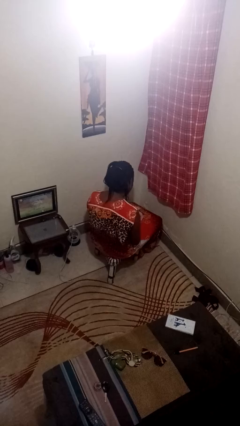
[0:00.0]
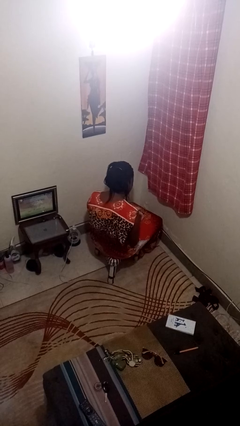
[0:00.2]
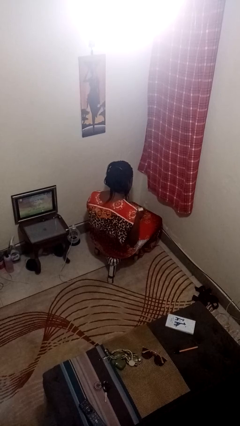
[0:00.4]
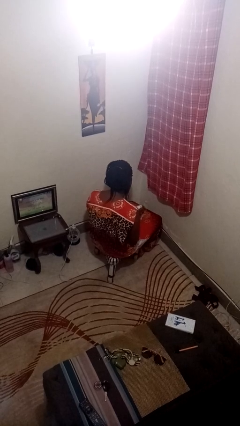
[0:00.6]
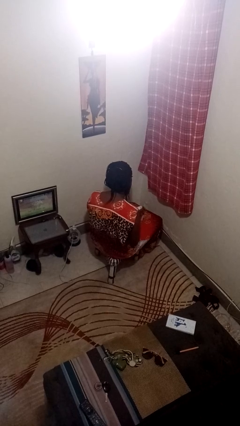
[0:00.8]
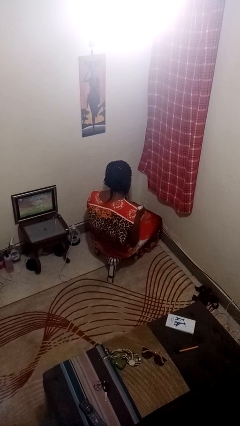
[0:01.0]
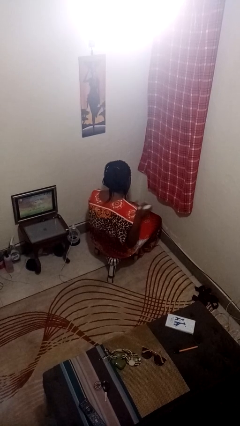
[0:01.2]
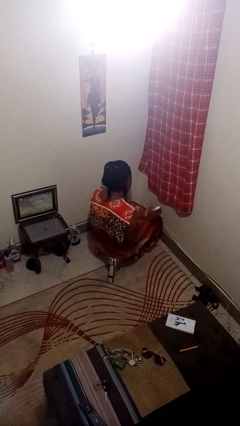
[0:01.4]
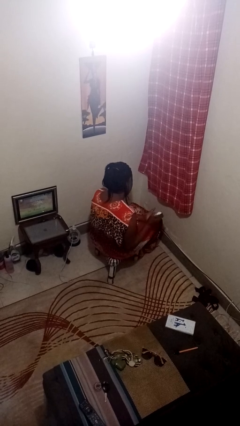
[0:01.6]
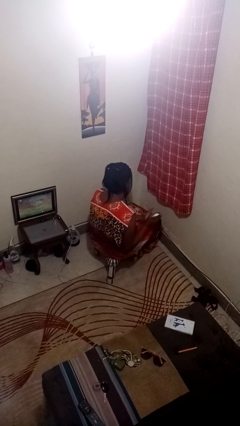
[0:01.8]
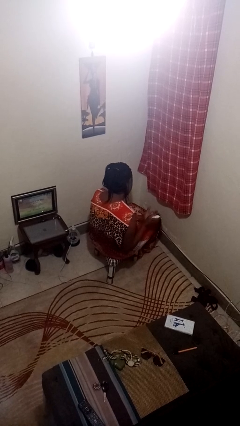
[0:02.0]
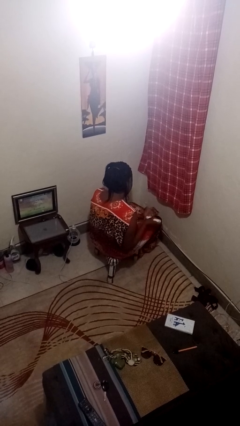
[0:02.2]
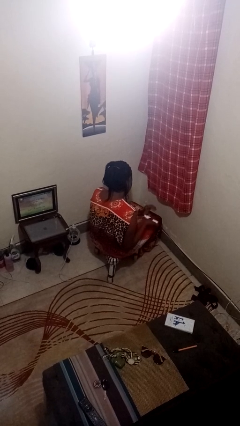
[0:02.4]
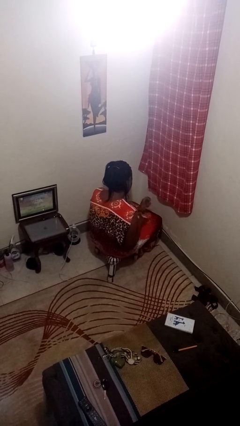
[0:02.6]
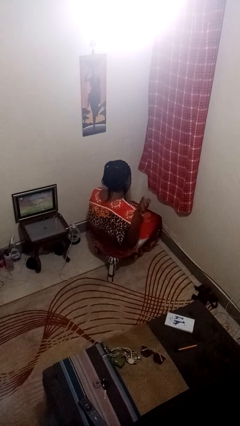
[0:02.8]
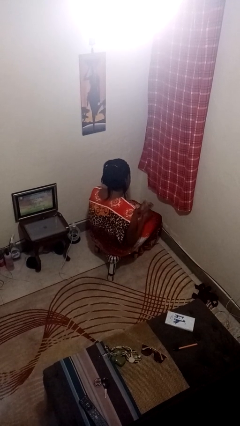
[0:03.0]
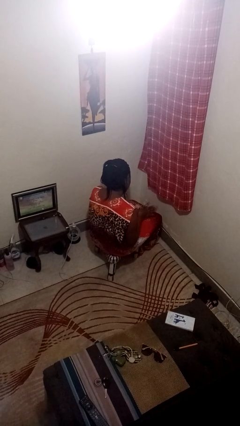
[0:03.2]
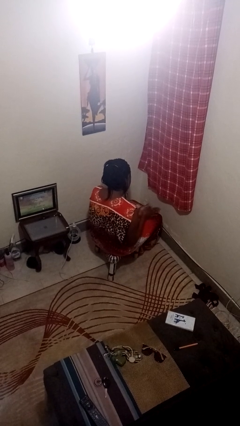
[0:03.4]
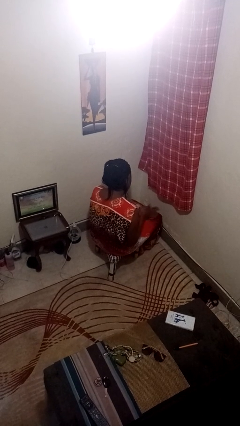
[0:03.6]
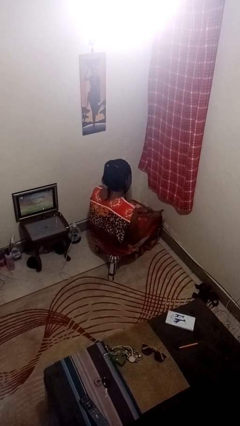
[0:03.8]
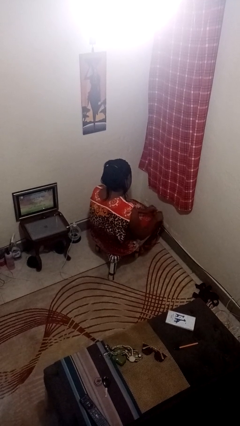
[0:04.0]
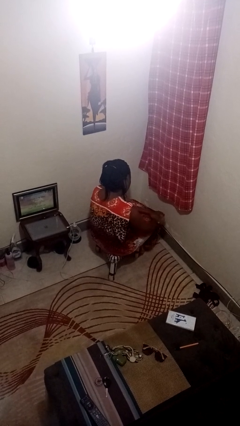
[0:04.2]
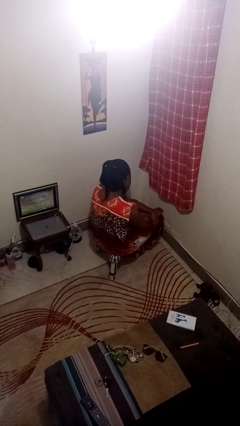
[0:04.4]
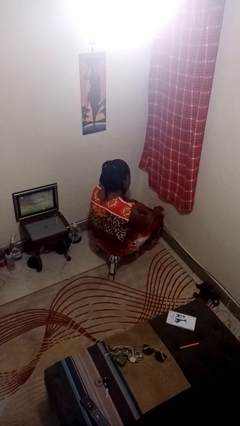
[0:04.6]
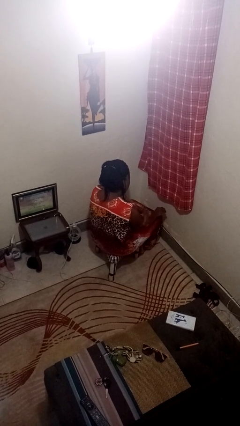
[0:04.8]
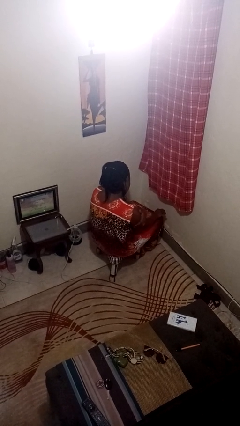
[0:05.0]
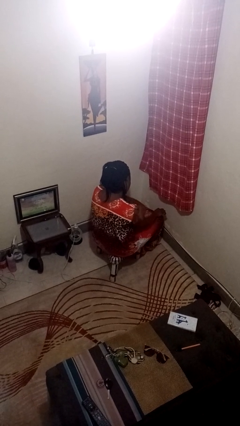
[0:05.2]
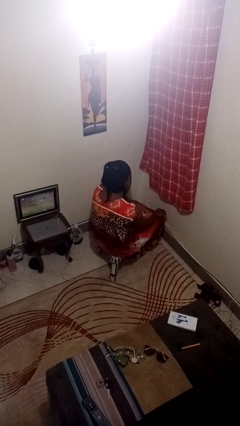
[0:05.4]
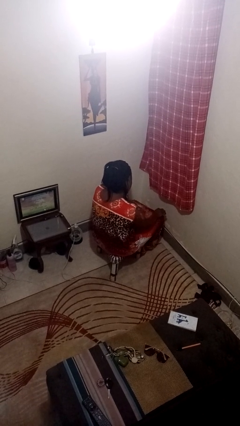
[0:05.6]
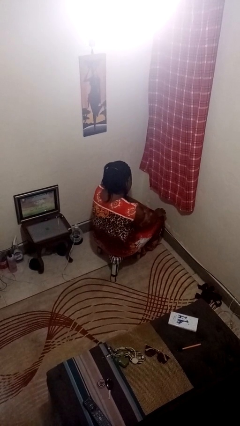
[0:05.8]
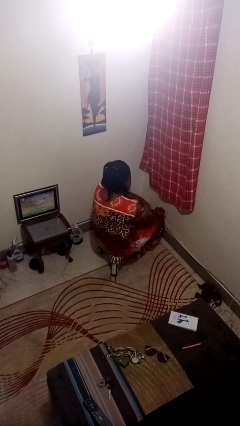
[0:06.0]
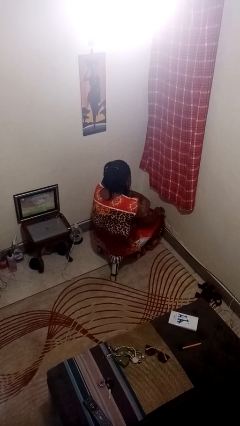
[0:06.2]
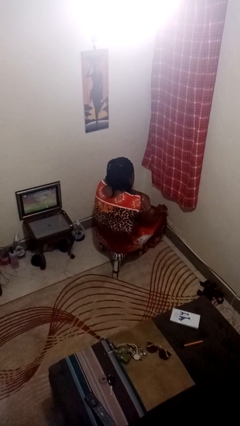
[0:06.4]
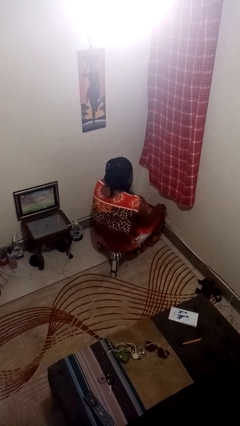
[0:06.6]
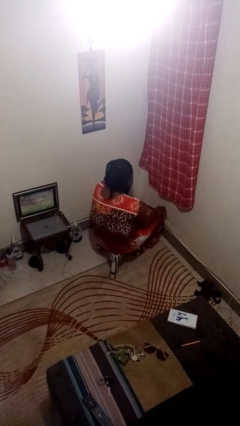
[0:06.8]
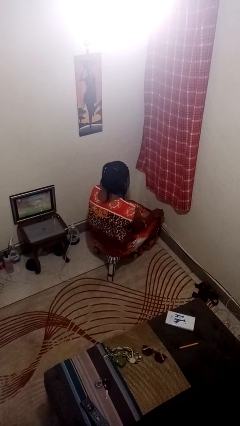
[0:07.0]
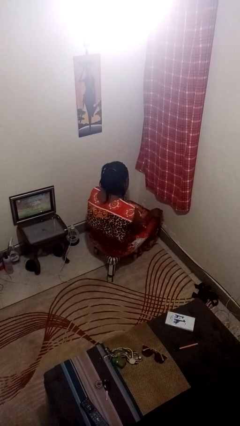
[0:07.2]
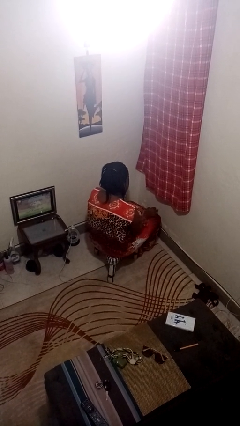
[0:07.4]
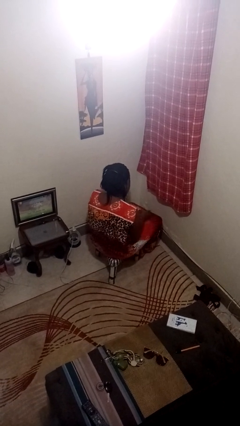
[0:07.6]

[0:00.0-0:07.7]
person applies sunscreen

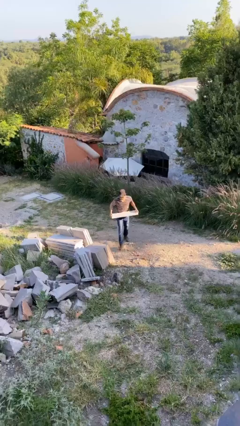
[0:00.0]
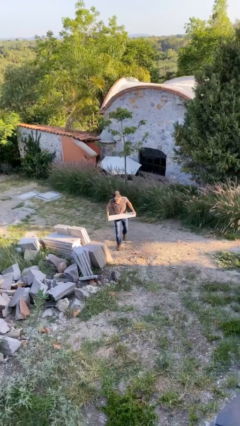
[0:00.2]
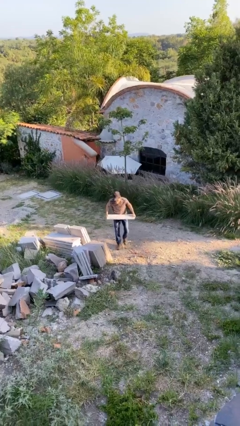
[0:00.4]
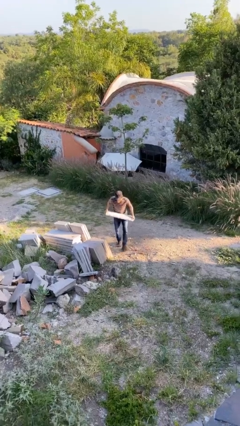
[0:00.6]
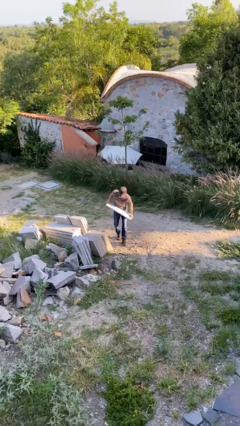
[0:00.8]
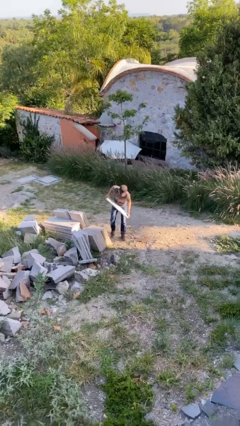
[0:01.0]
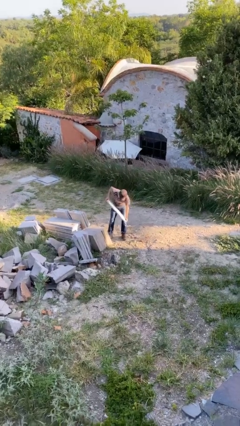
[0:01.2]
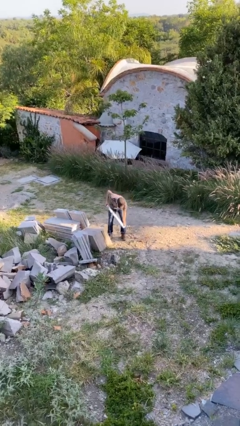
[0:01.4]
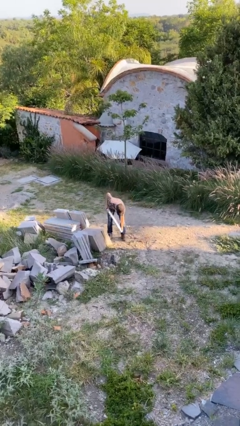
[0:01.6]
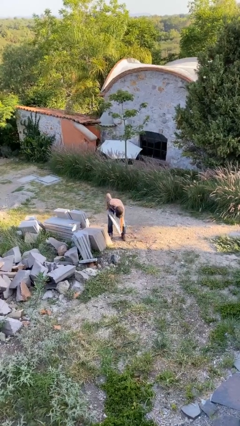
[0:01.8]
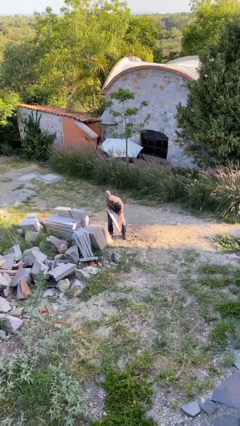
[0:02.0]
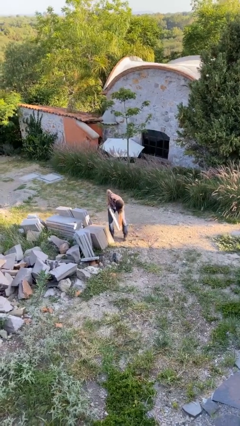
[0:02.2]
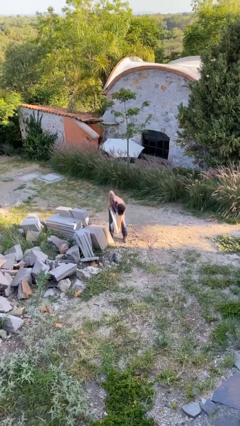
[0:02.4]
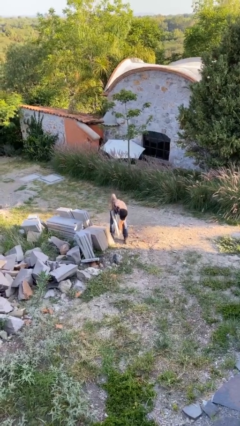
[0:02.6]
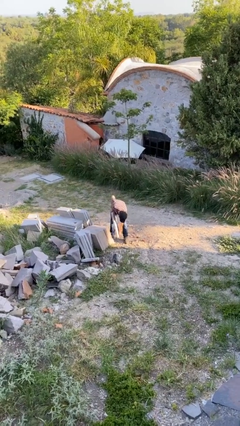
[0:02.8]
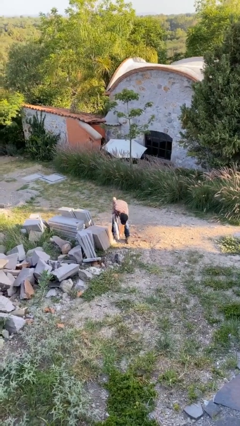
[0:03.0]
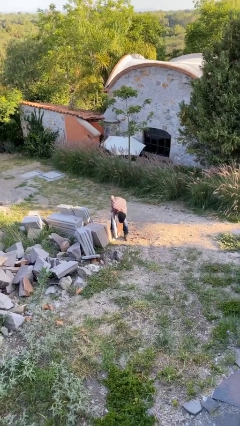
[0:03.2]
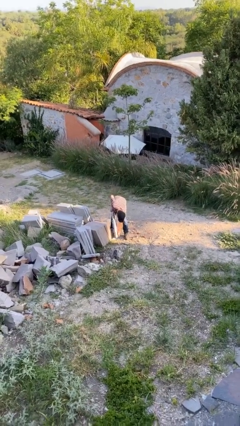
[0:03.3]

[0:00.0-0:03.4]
person carries heavy object

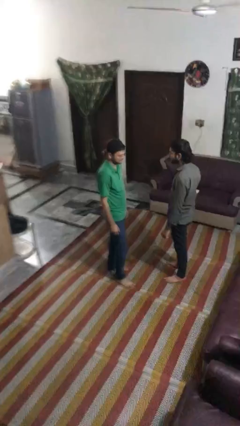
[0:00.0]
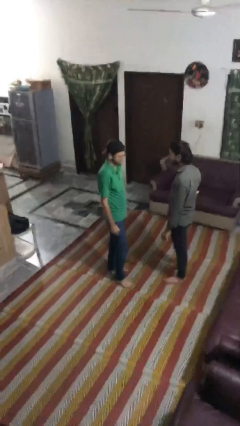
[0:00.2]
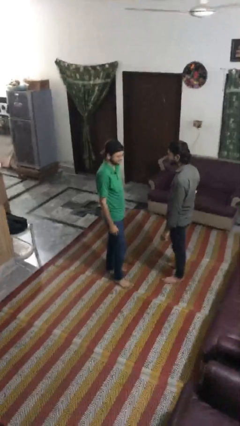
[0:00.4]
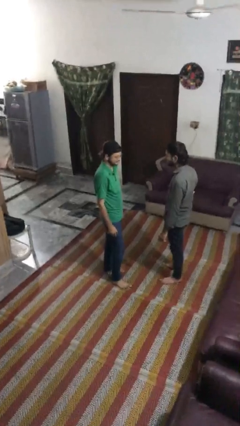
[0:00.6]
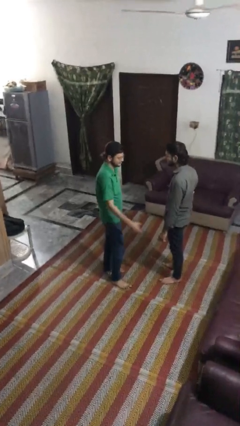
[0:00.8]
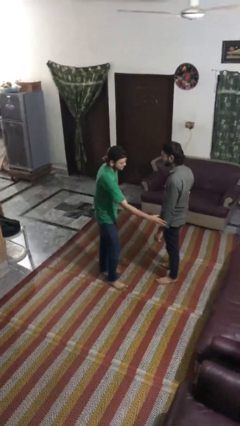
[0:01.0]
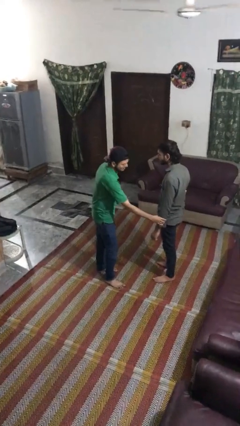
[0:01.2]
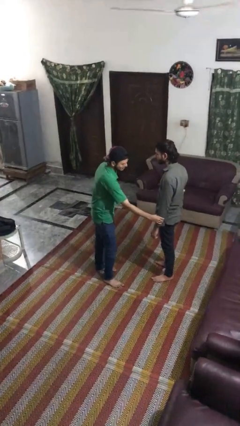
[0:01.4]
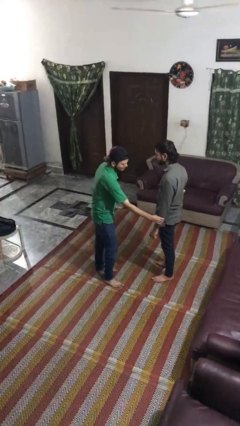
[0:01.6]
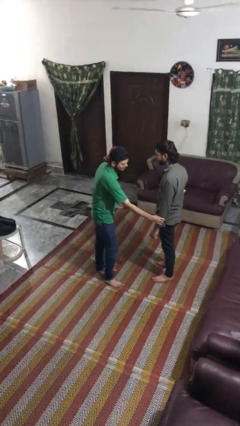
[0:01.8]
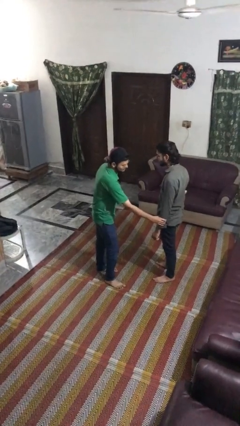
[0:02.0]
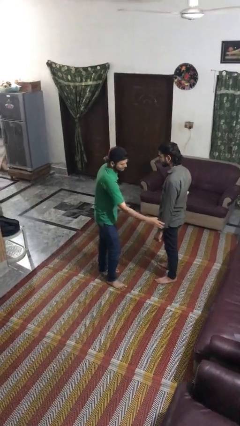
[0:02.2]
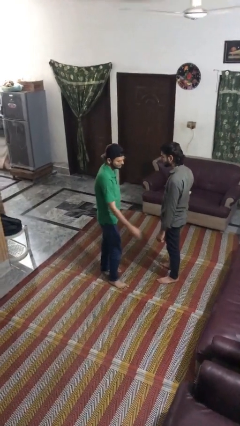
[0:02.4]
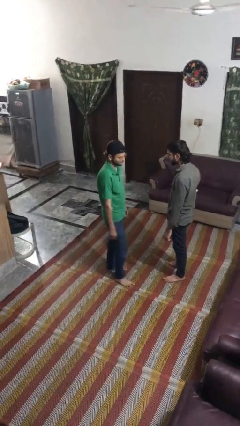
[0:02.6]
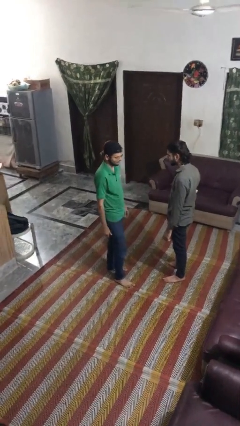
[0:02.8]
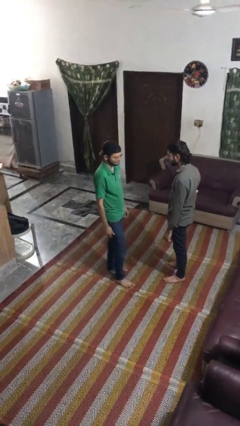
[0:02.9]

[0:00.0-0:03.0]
person grabs person by forearm

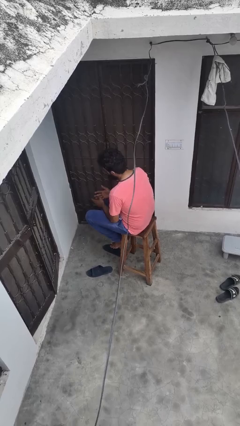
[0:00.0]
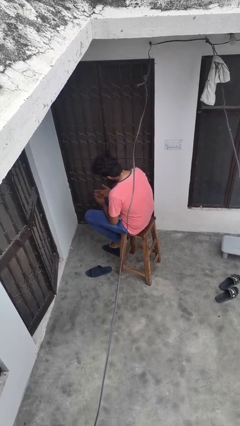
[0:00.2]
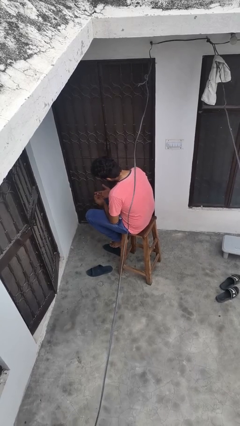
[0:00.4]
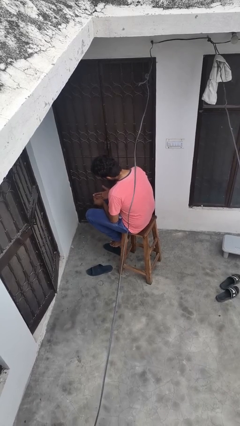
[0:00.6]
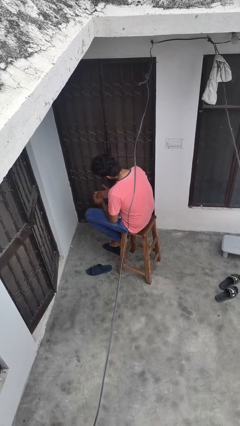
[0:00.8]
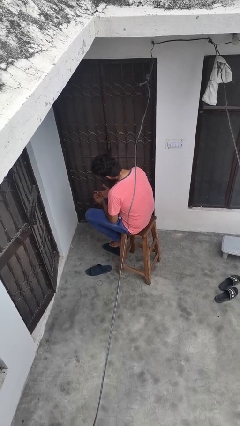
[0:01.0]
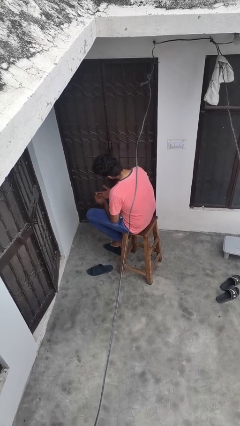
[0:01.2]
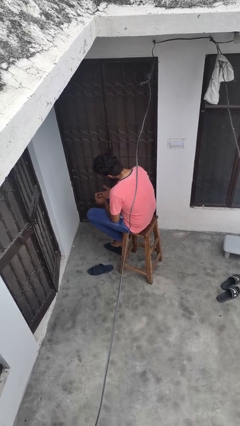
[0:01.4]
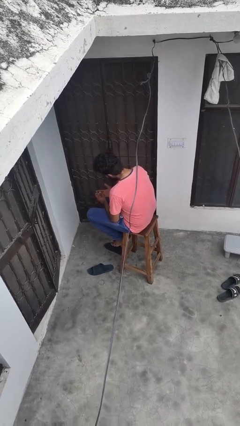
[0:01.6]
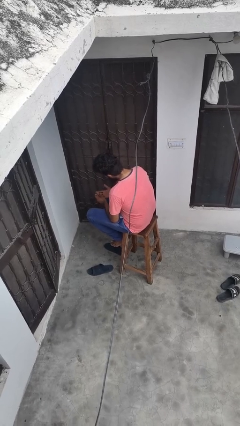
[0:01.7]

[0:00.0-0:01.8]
person looks at hands in lap

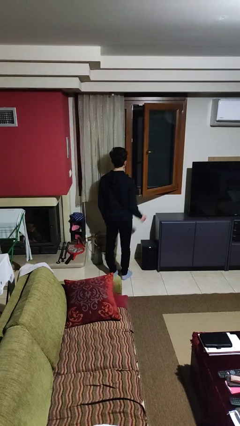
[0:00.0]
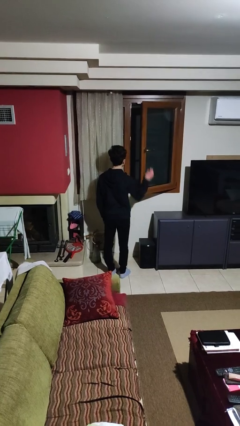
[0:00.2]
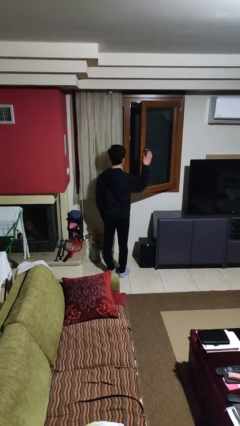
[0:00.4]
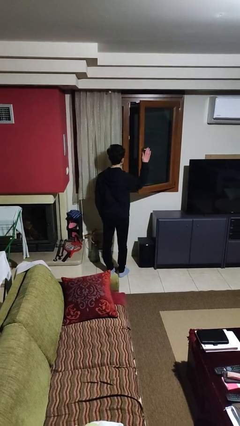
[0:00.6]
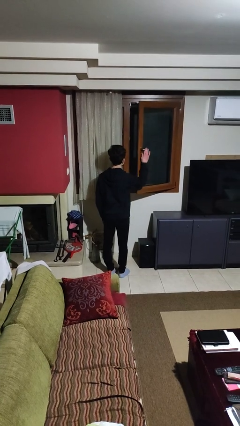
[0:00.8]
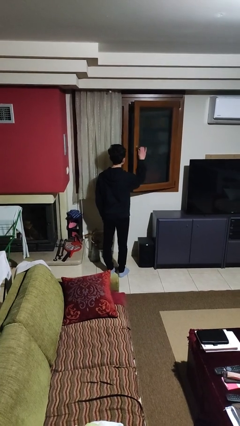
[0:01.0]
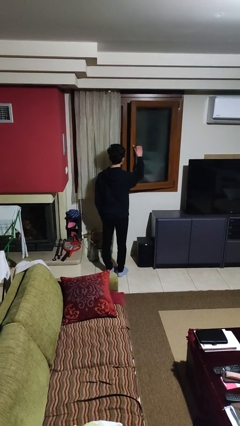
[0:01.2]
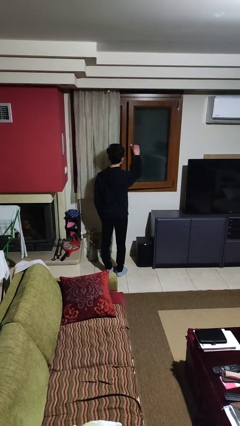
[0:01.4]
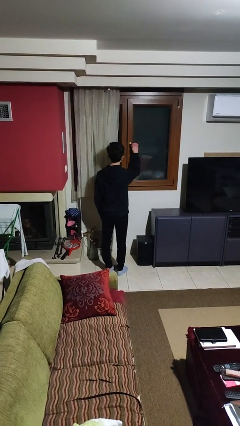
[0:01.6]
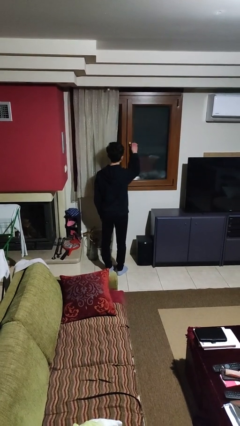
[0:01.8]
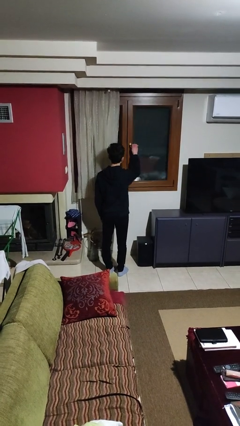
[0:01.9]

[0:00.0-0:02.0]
person closes home window

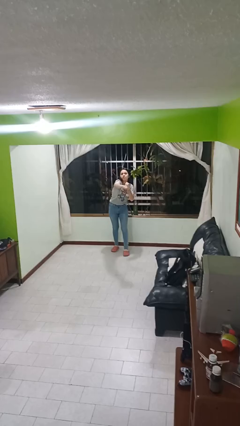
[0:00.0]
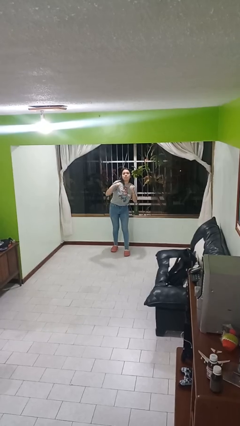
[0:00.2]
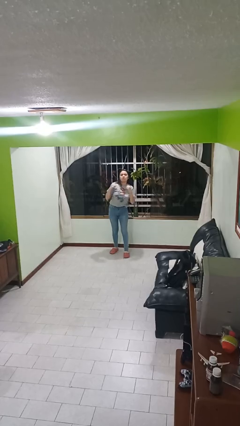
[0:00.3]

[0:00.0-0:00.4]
person punches
